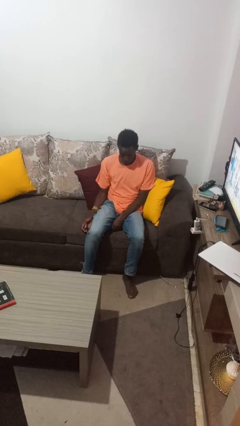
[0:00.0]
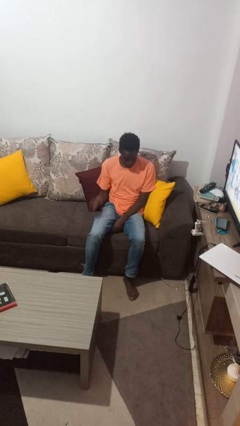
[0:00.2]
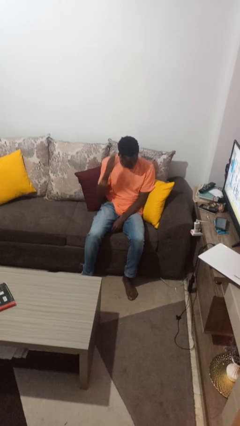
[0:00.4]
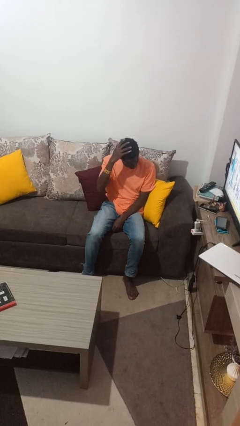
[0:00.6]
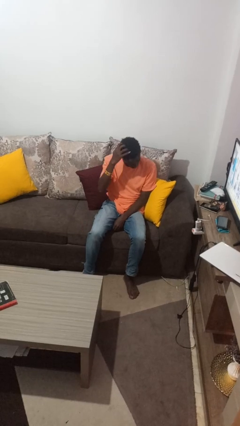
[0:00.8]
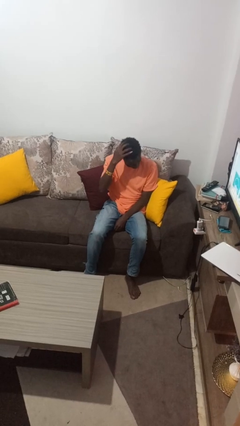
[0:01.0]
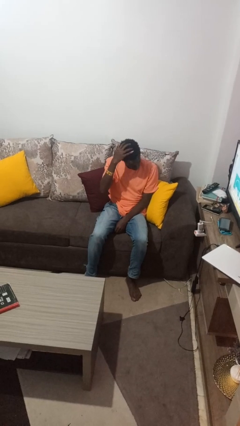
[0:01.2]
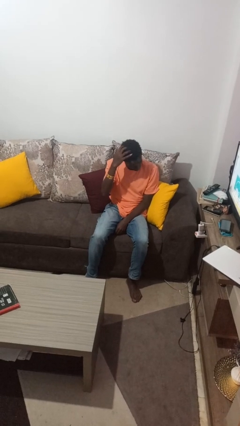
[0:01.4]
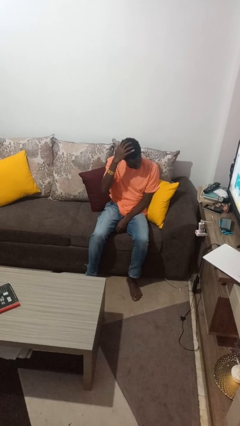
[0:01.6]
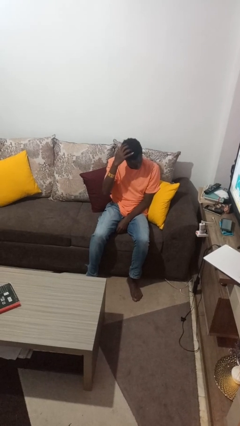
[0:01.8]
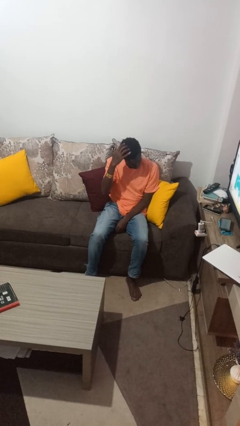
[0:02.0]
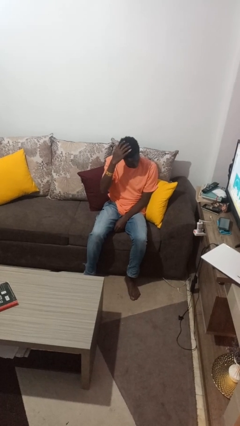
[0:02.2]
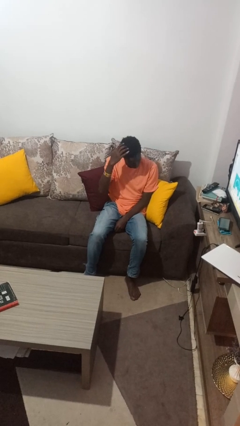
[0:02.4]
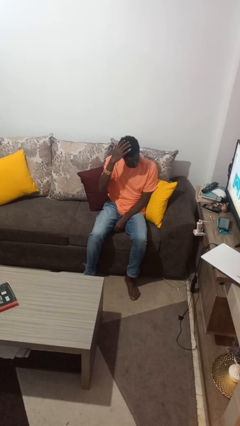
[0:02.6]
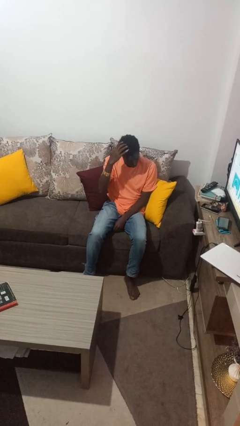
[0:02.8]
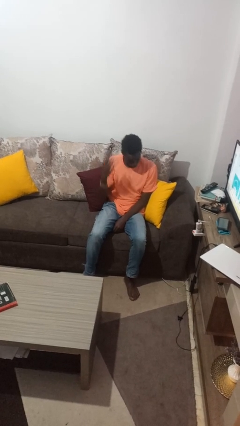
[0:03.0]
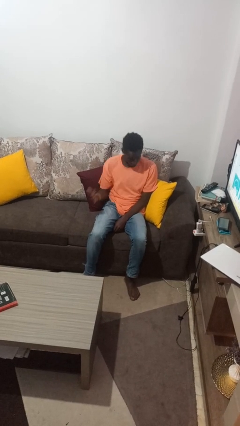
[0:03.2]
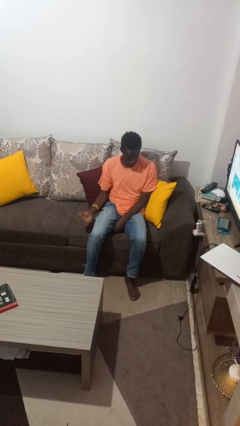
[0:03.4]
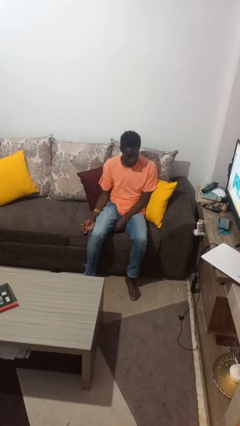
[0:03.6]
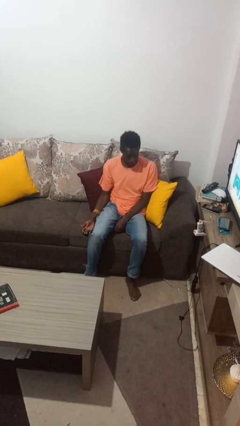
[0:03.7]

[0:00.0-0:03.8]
person strokes hair

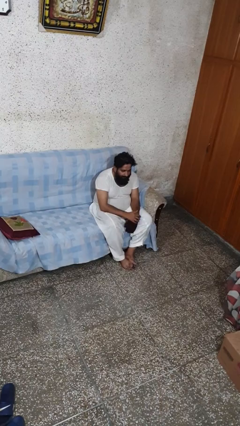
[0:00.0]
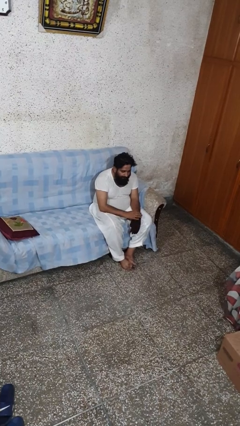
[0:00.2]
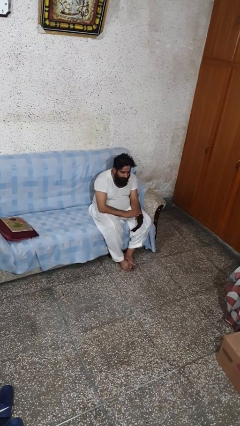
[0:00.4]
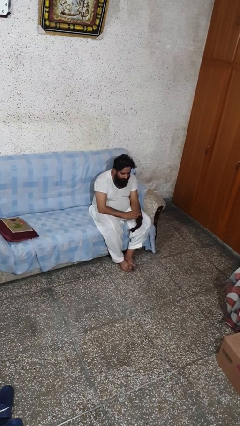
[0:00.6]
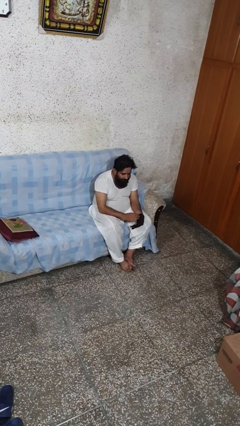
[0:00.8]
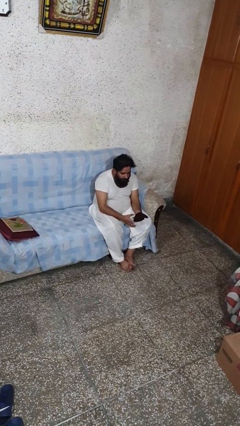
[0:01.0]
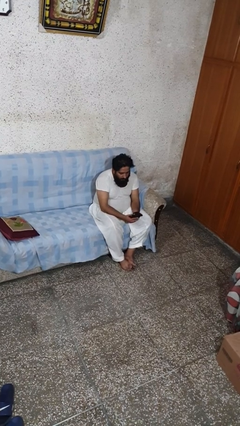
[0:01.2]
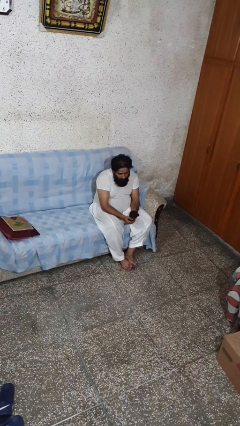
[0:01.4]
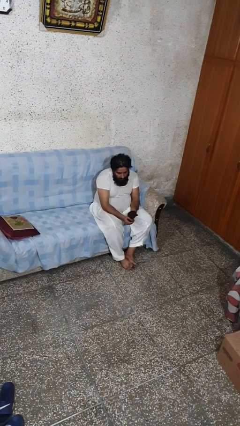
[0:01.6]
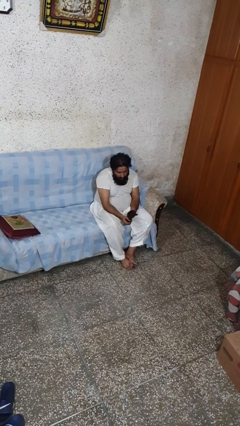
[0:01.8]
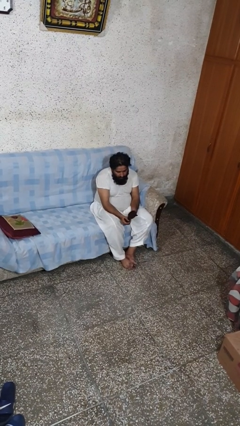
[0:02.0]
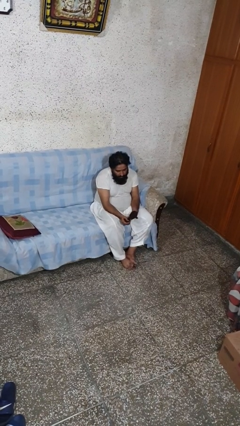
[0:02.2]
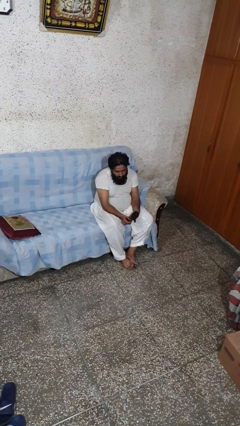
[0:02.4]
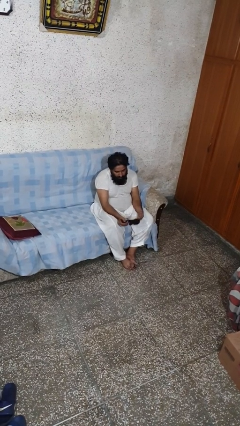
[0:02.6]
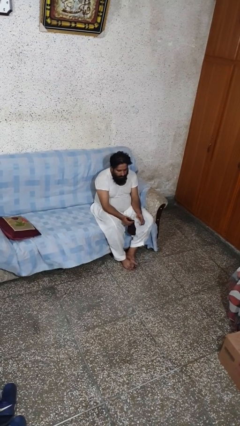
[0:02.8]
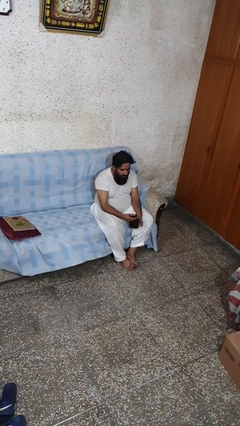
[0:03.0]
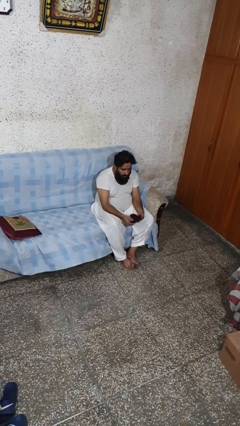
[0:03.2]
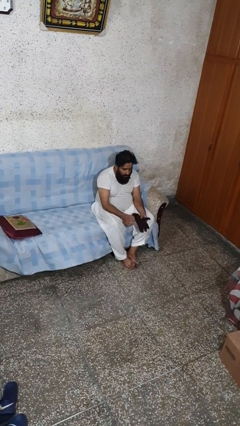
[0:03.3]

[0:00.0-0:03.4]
person takes off gloves

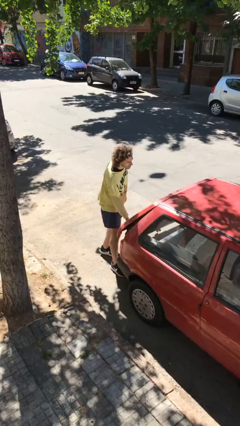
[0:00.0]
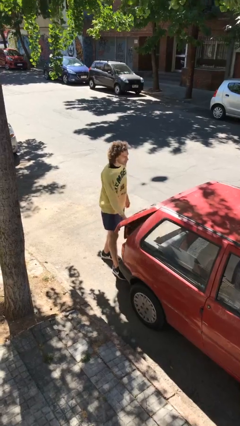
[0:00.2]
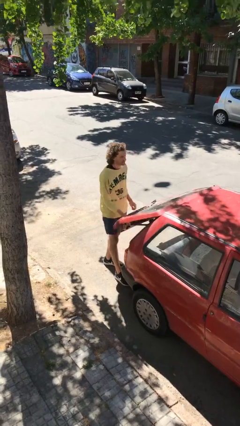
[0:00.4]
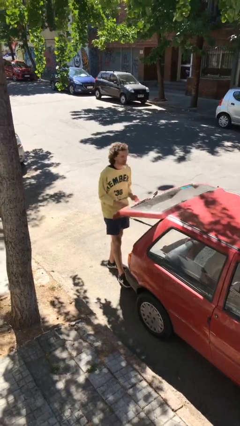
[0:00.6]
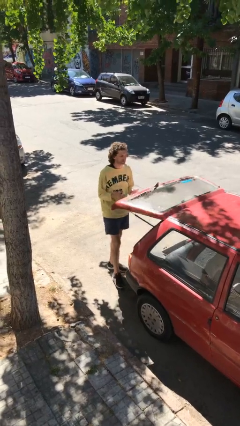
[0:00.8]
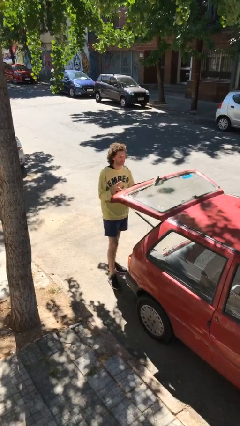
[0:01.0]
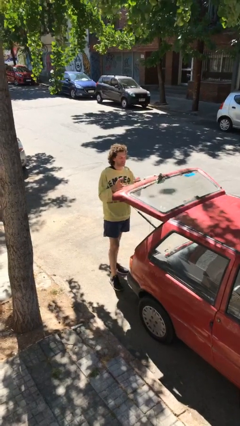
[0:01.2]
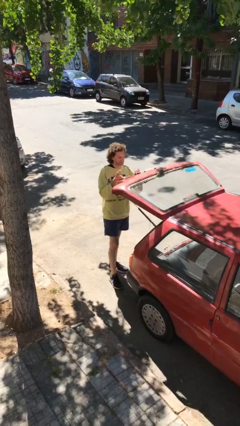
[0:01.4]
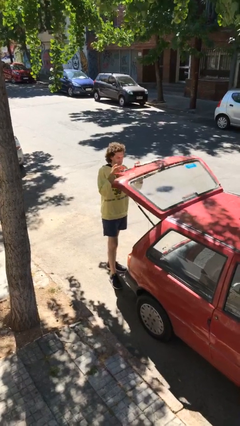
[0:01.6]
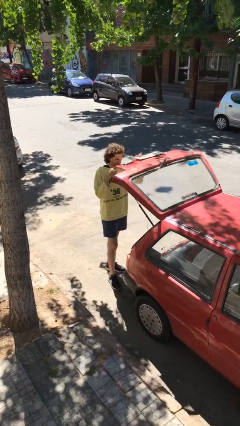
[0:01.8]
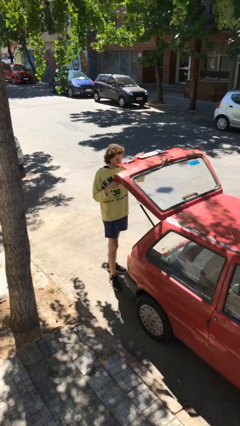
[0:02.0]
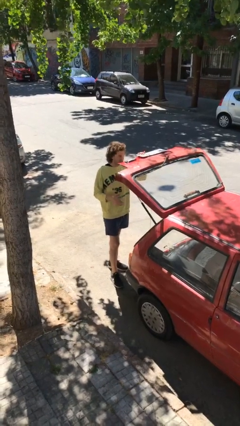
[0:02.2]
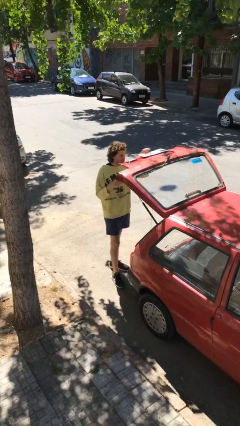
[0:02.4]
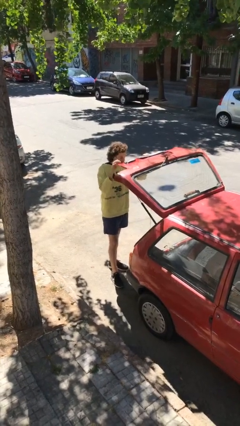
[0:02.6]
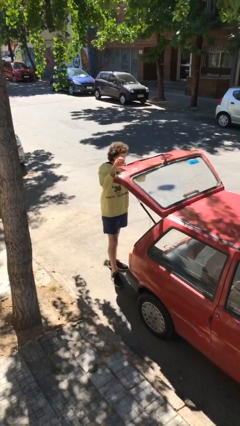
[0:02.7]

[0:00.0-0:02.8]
person opens car trunk

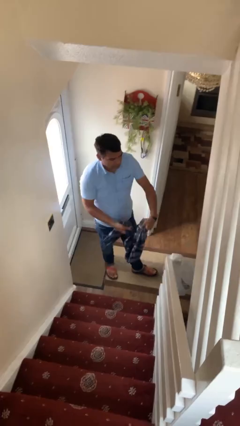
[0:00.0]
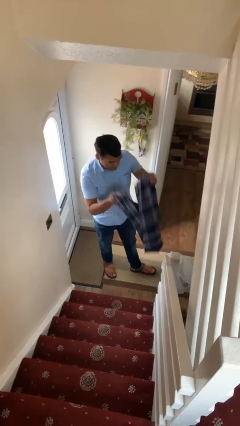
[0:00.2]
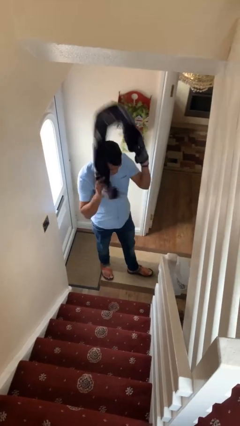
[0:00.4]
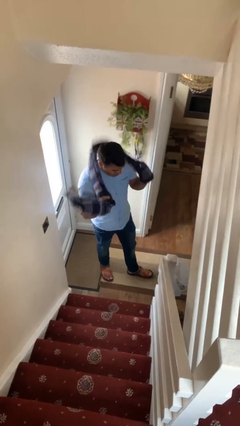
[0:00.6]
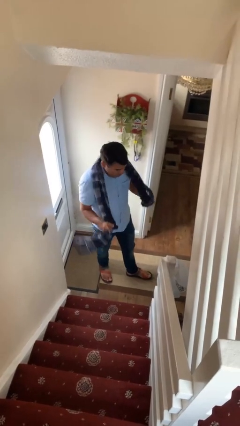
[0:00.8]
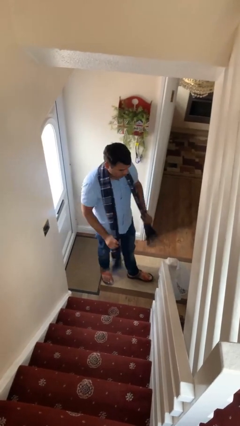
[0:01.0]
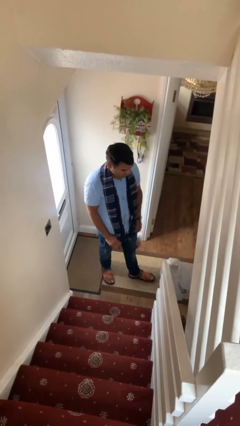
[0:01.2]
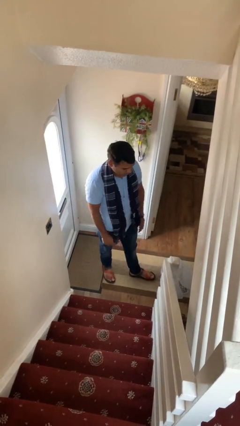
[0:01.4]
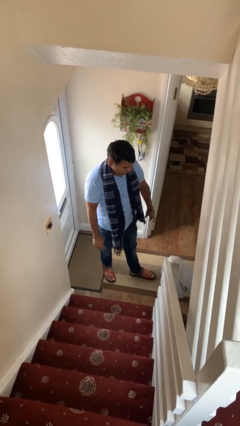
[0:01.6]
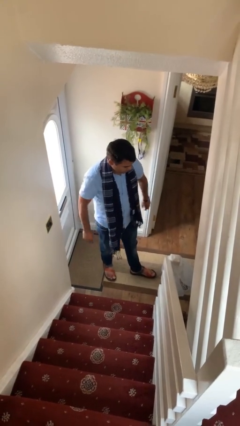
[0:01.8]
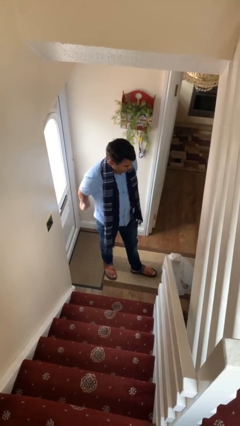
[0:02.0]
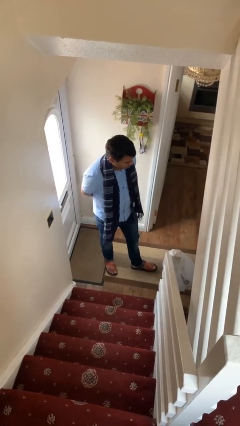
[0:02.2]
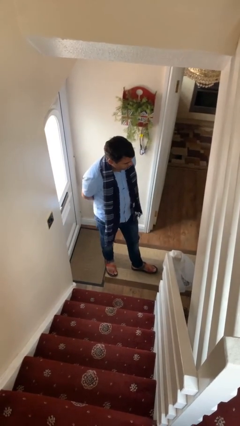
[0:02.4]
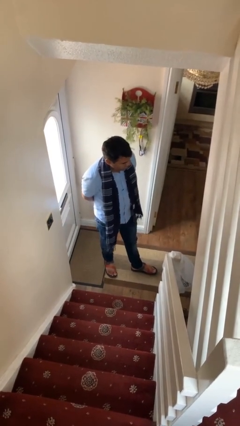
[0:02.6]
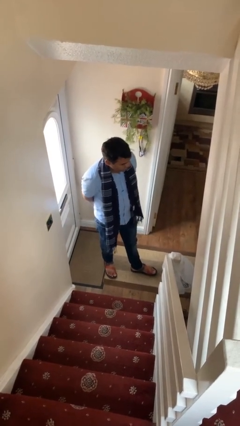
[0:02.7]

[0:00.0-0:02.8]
person puts on scarf

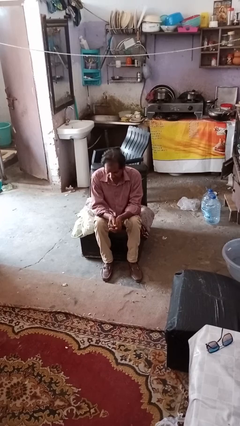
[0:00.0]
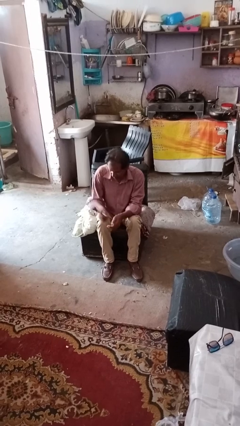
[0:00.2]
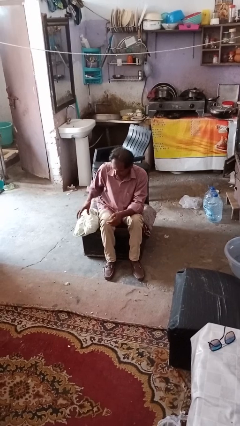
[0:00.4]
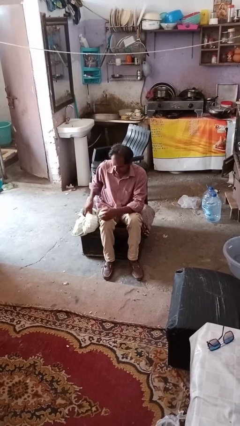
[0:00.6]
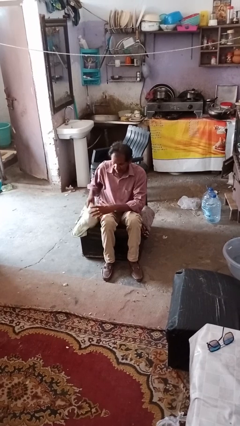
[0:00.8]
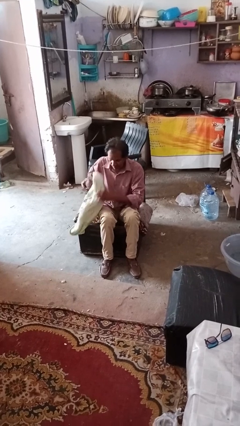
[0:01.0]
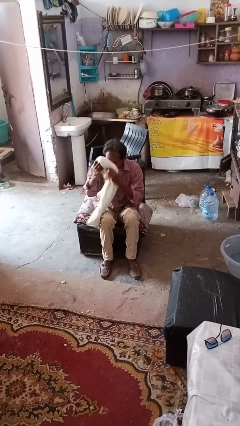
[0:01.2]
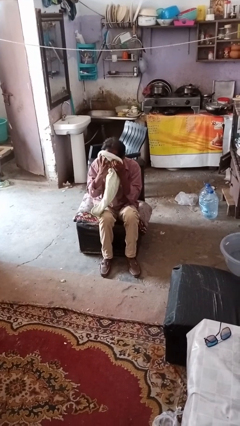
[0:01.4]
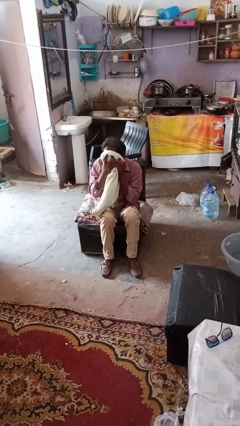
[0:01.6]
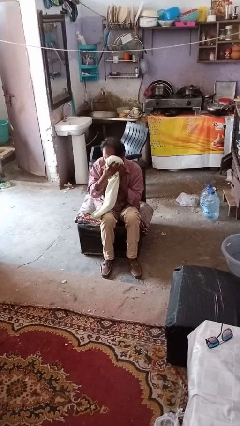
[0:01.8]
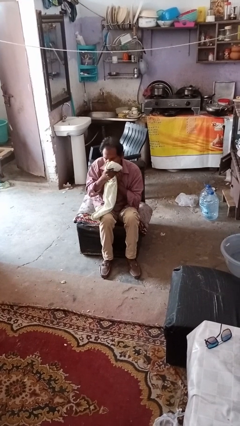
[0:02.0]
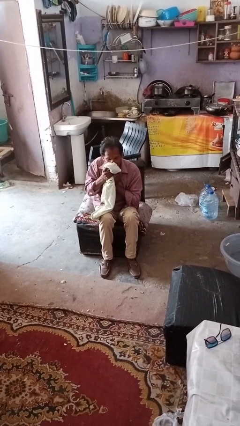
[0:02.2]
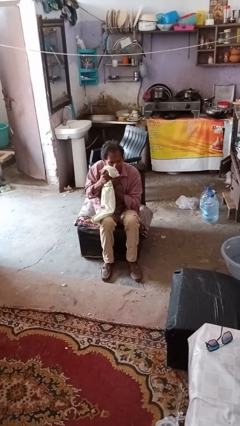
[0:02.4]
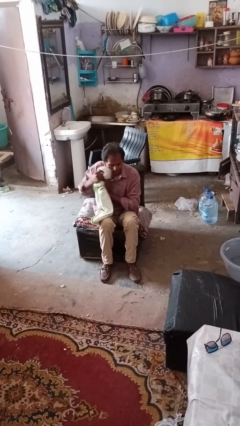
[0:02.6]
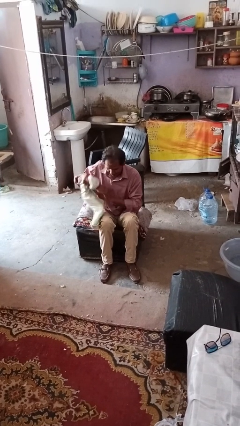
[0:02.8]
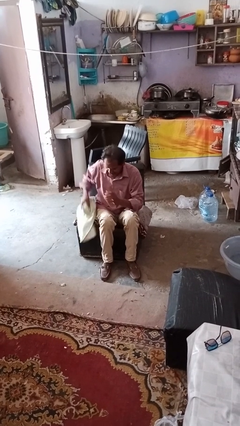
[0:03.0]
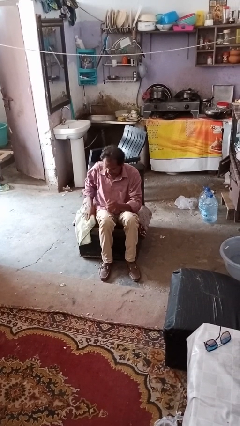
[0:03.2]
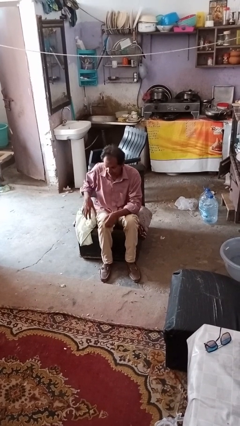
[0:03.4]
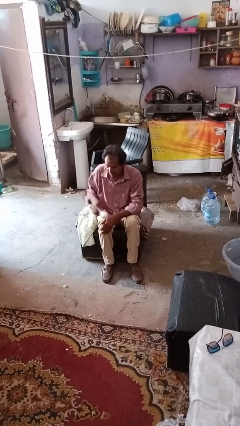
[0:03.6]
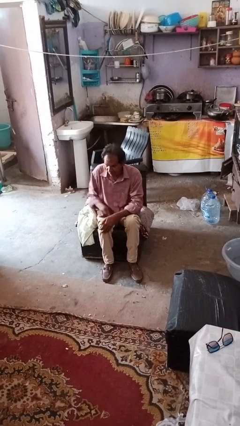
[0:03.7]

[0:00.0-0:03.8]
person wipes mouth with napkin

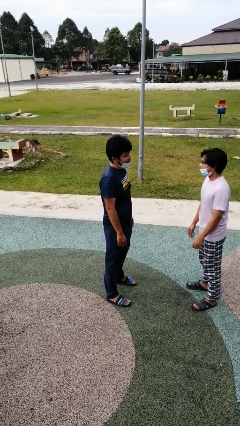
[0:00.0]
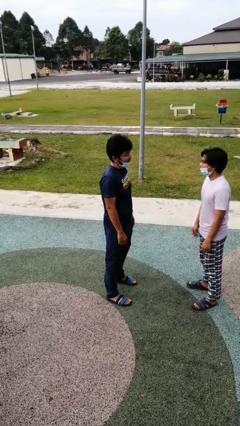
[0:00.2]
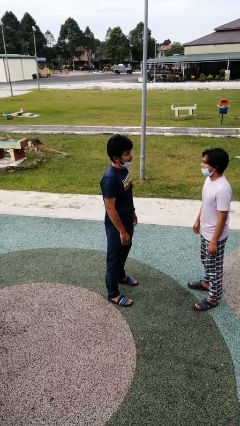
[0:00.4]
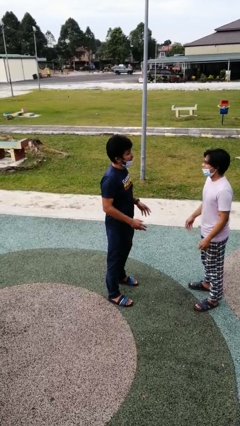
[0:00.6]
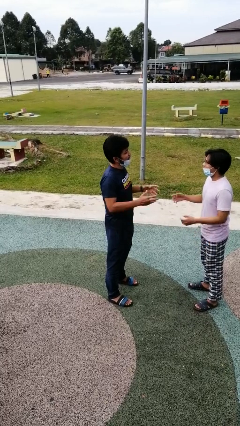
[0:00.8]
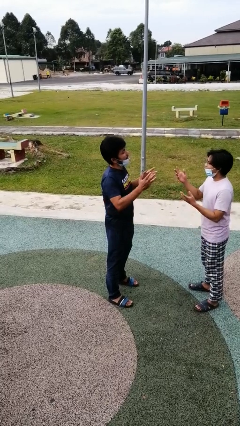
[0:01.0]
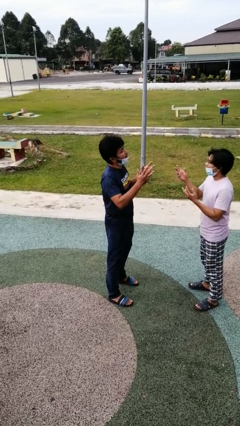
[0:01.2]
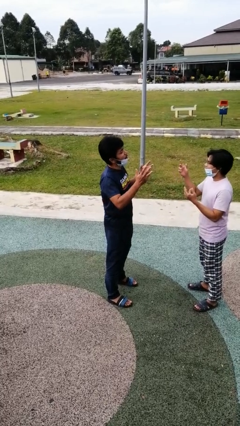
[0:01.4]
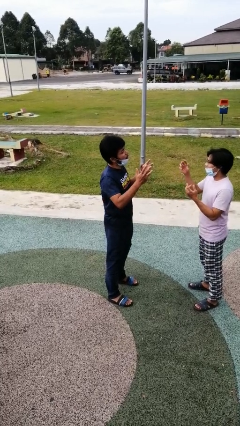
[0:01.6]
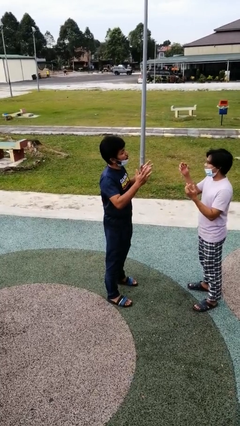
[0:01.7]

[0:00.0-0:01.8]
person talks to person
